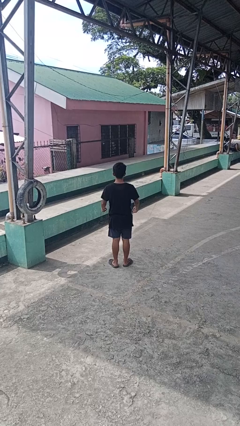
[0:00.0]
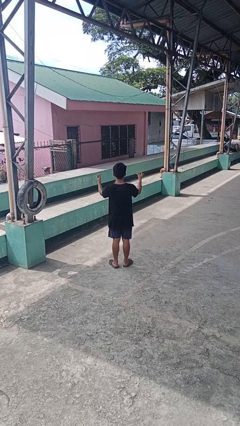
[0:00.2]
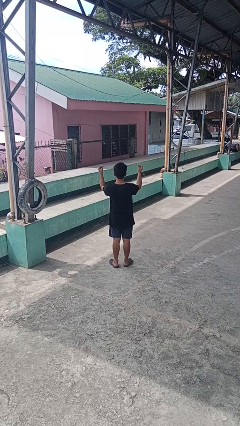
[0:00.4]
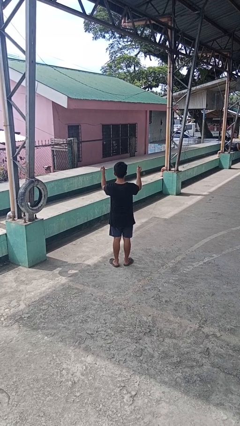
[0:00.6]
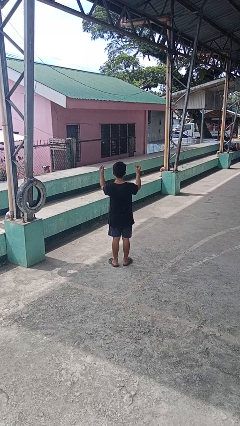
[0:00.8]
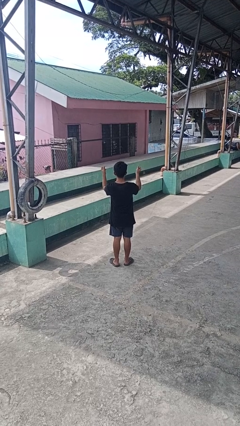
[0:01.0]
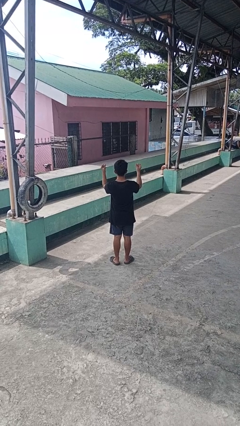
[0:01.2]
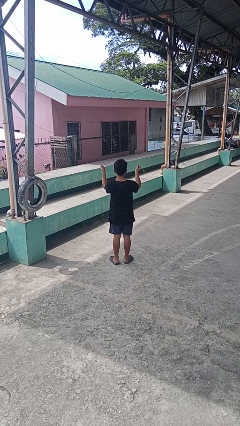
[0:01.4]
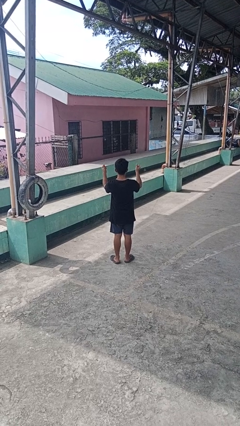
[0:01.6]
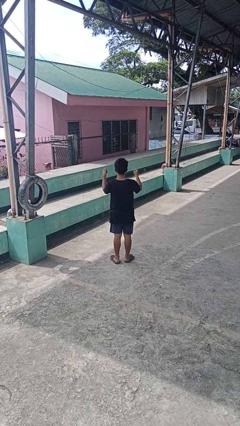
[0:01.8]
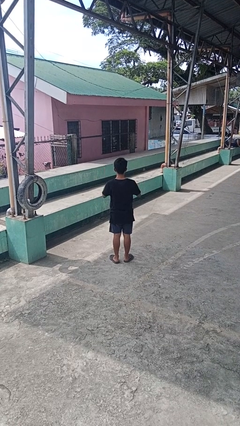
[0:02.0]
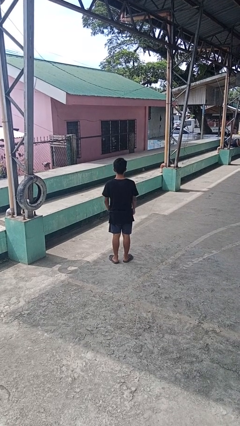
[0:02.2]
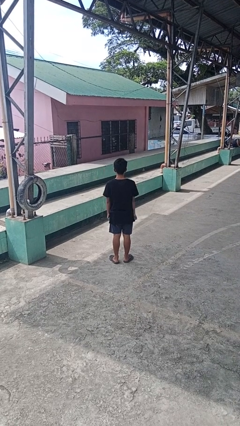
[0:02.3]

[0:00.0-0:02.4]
person snaps fingers

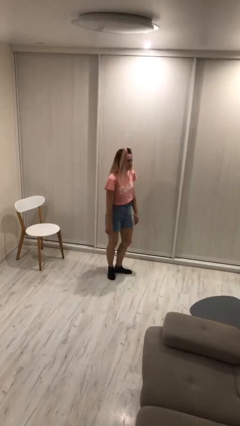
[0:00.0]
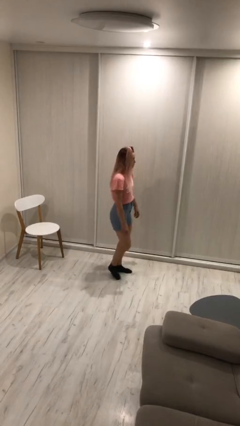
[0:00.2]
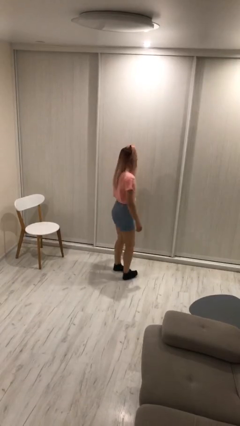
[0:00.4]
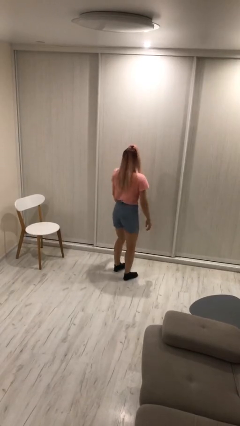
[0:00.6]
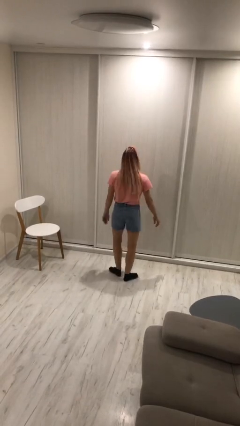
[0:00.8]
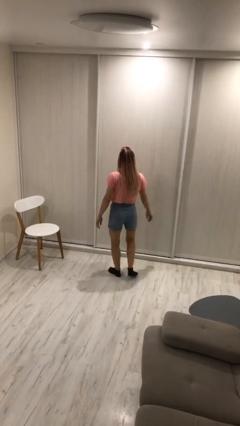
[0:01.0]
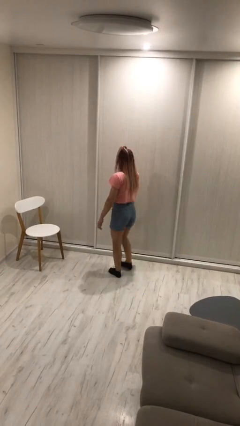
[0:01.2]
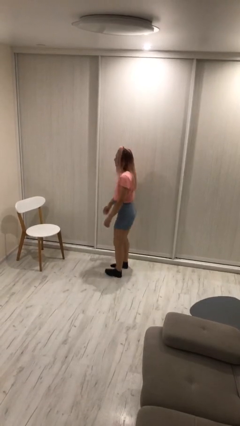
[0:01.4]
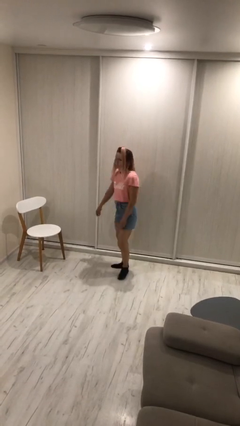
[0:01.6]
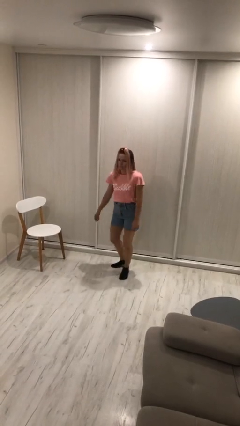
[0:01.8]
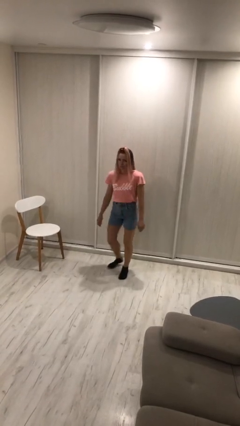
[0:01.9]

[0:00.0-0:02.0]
person twirls

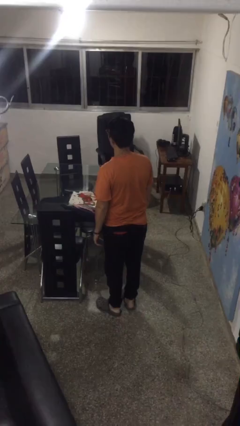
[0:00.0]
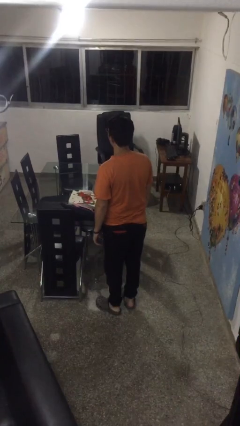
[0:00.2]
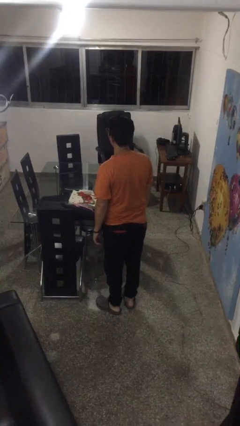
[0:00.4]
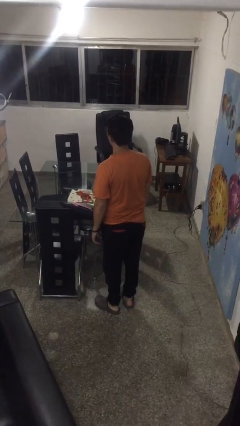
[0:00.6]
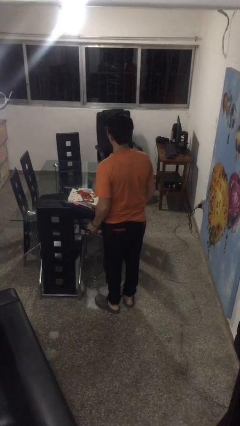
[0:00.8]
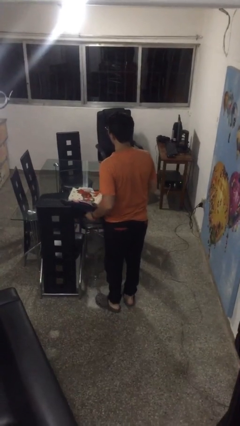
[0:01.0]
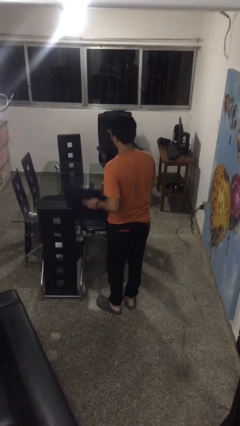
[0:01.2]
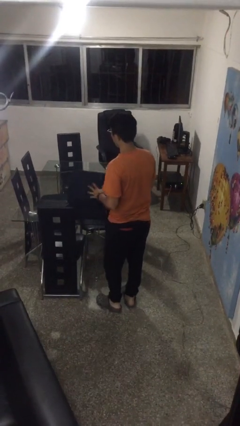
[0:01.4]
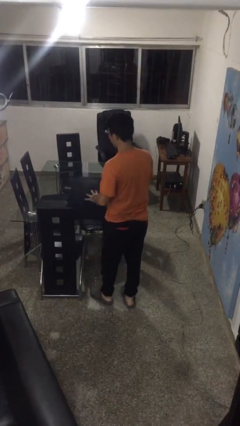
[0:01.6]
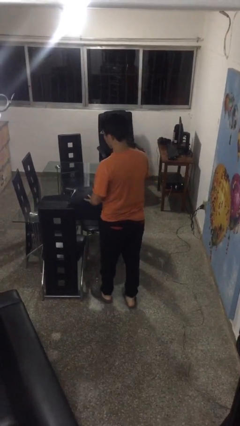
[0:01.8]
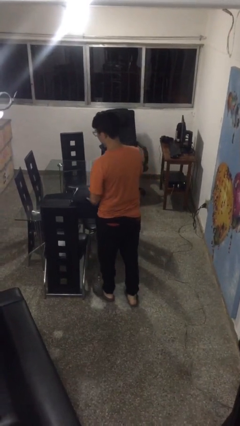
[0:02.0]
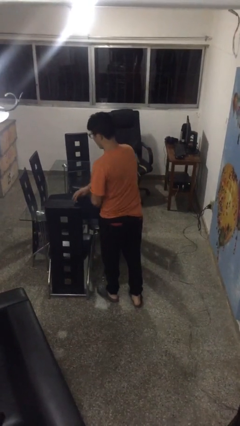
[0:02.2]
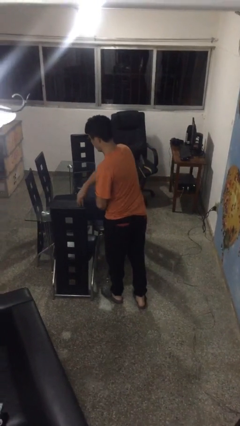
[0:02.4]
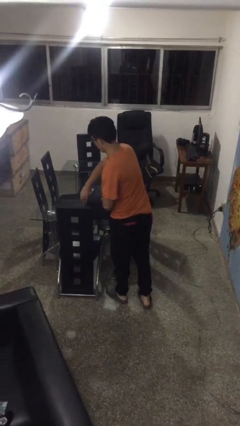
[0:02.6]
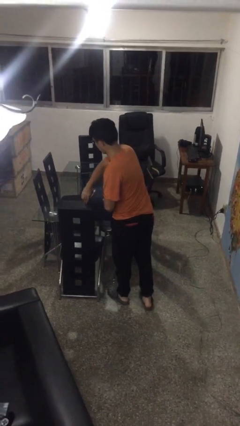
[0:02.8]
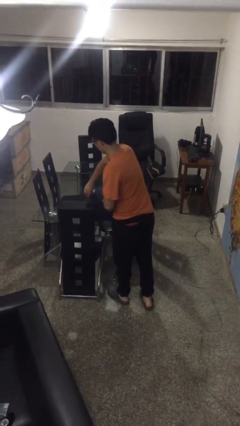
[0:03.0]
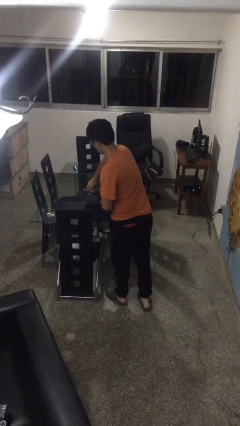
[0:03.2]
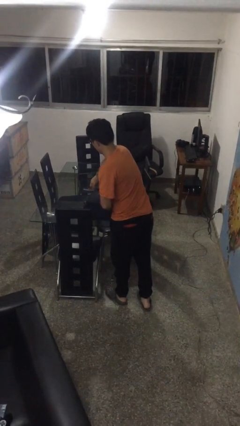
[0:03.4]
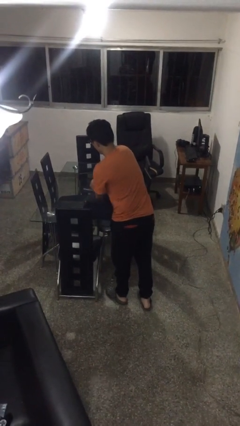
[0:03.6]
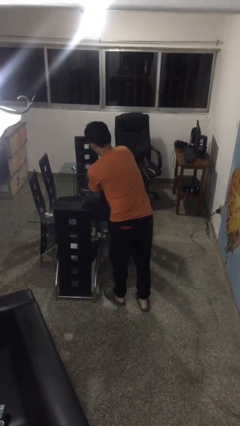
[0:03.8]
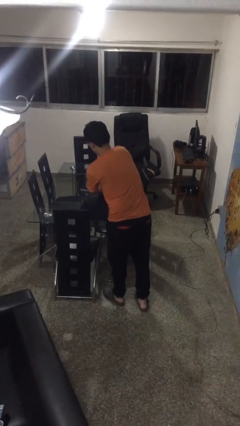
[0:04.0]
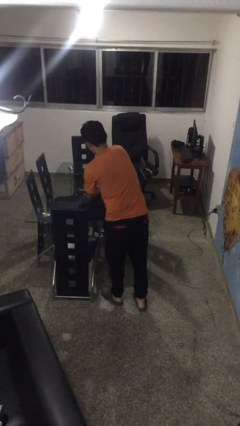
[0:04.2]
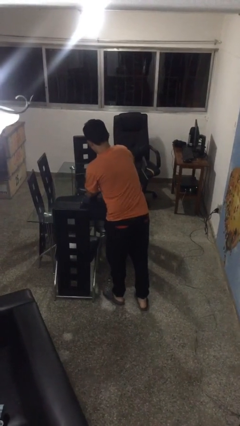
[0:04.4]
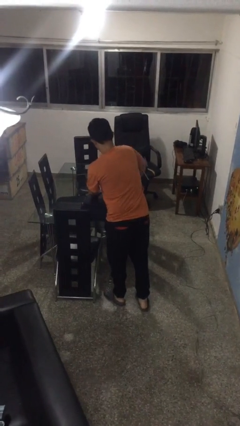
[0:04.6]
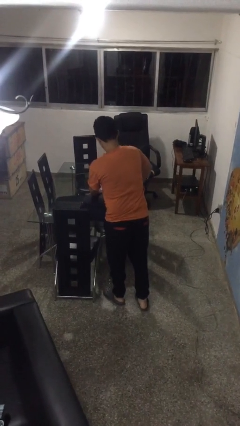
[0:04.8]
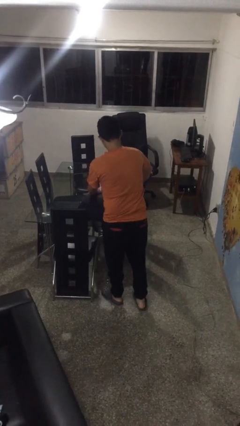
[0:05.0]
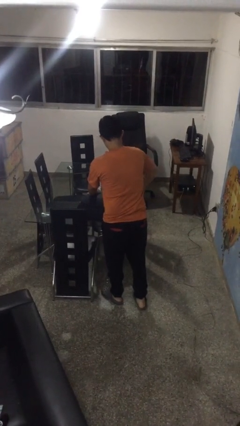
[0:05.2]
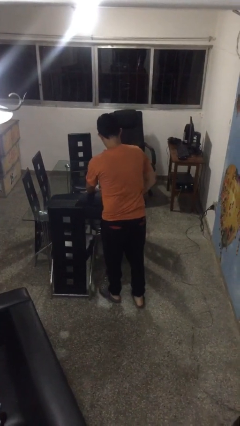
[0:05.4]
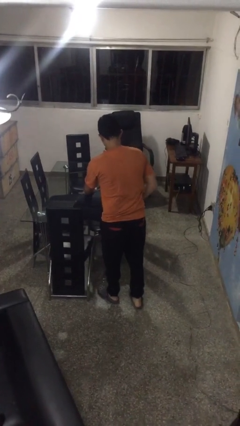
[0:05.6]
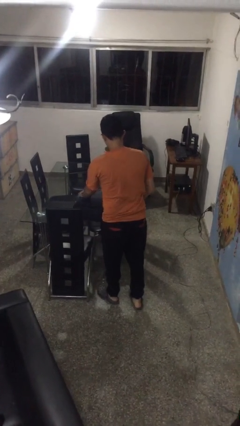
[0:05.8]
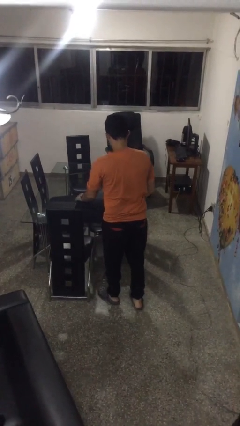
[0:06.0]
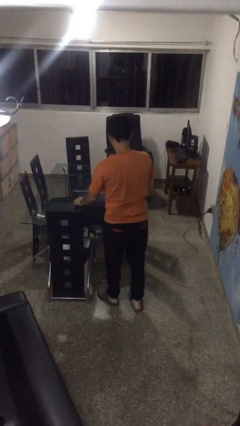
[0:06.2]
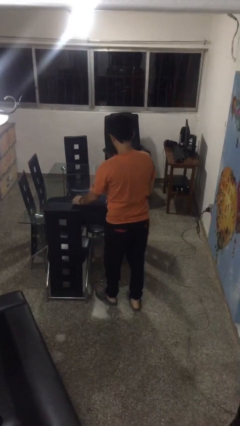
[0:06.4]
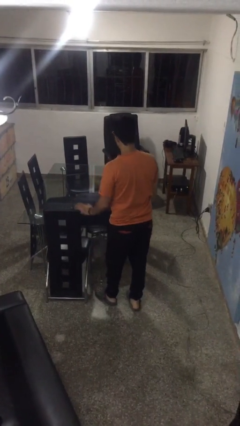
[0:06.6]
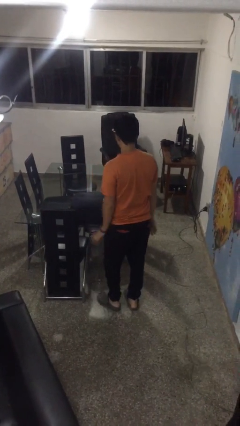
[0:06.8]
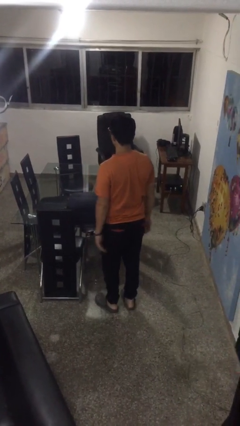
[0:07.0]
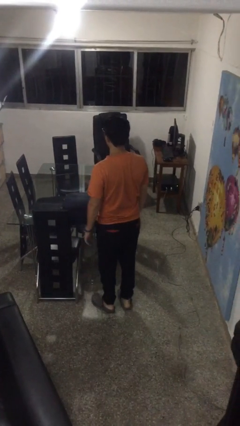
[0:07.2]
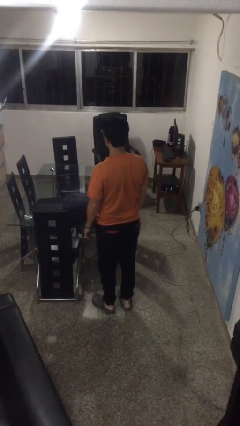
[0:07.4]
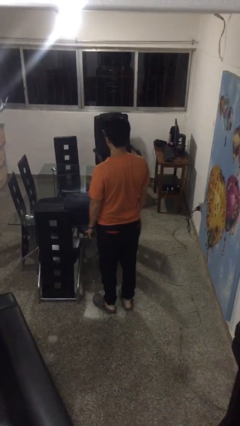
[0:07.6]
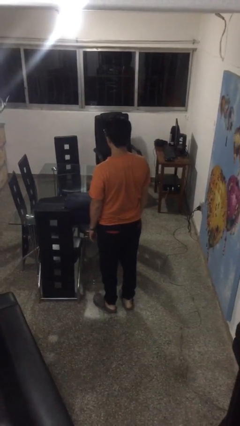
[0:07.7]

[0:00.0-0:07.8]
person closes suitcase

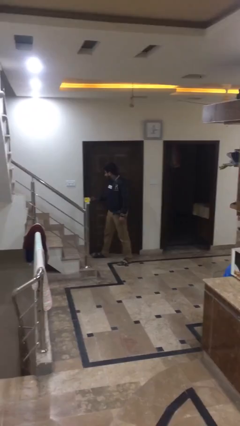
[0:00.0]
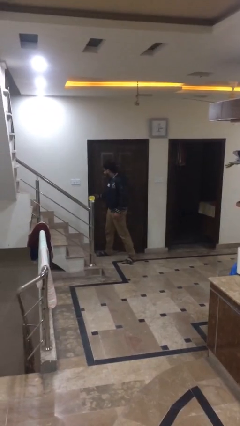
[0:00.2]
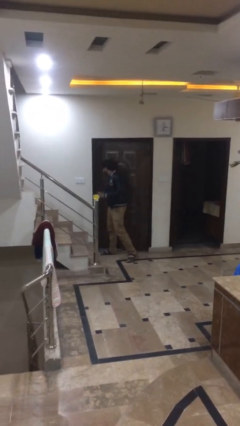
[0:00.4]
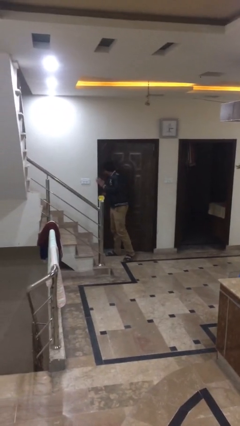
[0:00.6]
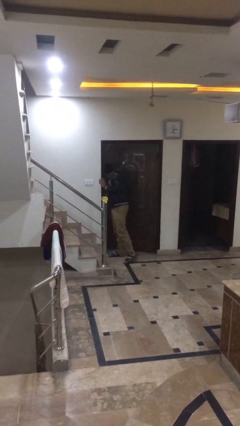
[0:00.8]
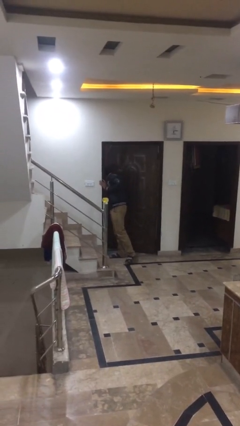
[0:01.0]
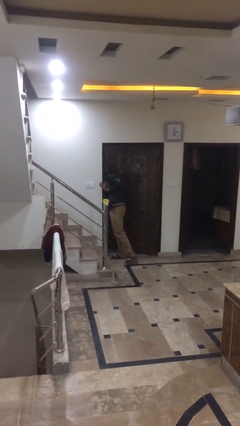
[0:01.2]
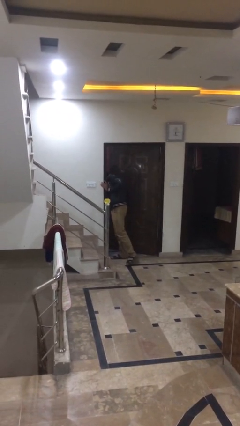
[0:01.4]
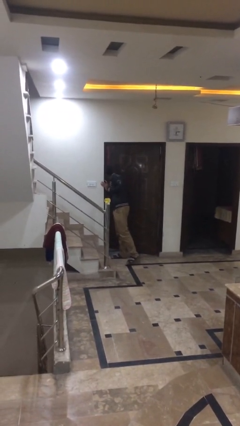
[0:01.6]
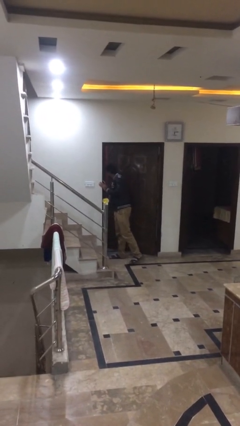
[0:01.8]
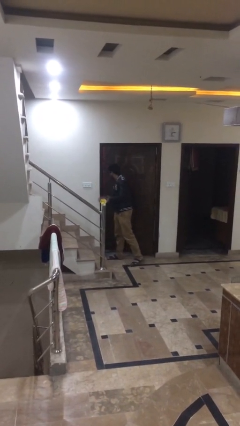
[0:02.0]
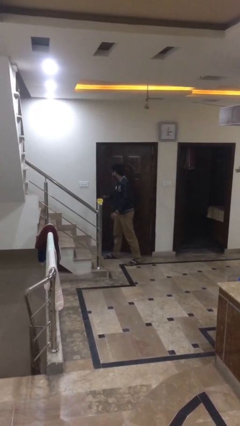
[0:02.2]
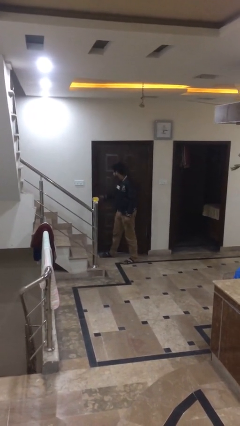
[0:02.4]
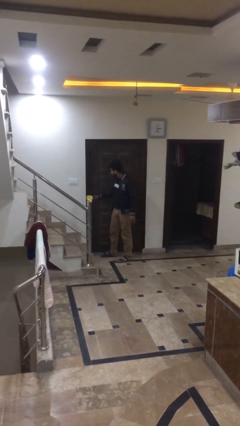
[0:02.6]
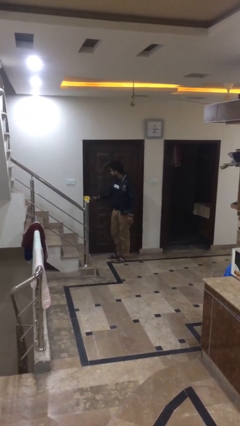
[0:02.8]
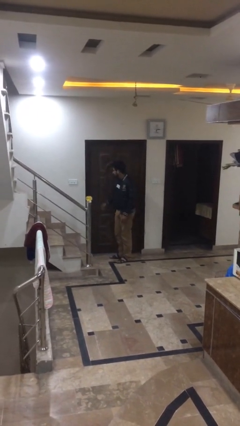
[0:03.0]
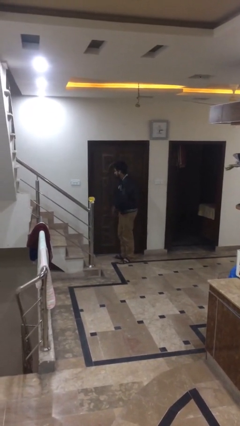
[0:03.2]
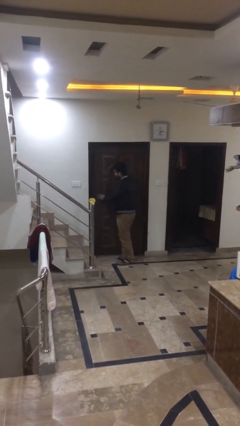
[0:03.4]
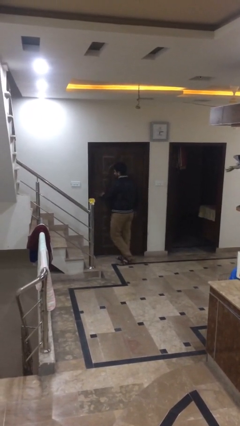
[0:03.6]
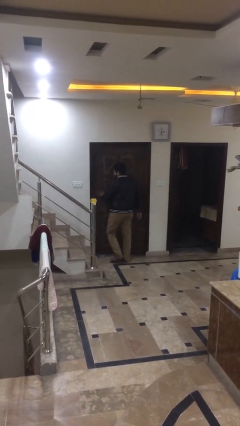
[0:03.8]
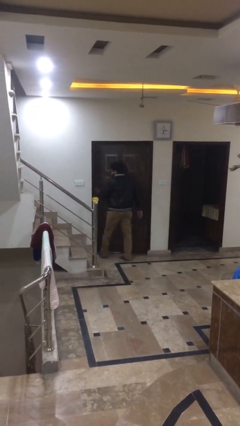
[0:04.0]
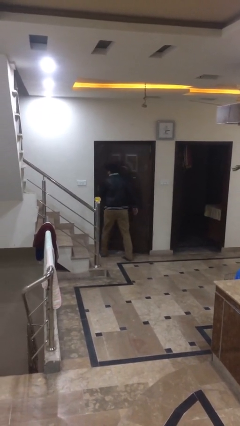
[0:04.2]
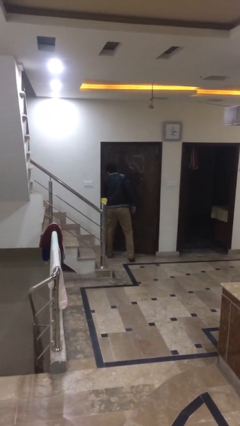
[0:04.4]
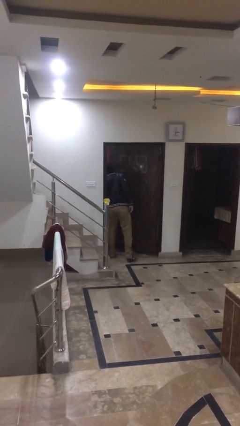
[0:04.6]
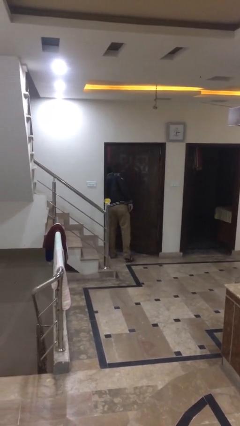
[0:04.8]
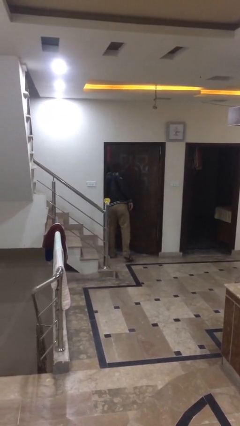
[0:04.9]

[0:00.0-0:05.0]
person opens facility door

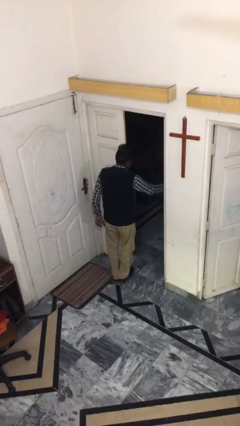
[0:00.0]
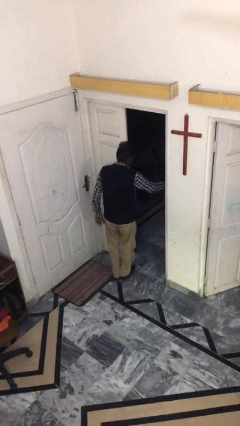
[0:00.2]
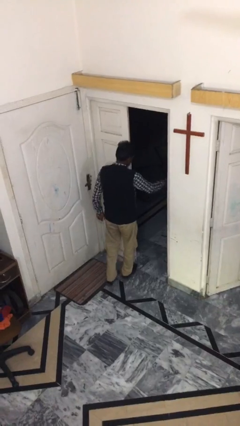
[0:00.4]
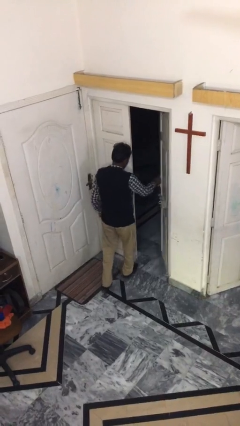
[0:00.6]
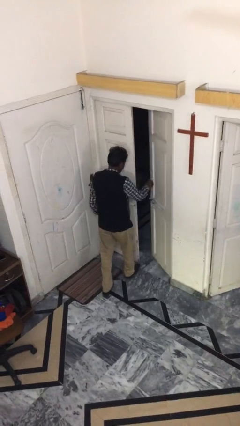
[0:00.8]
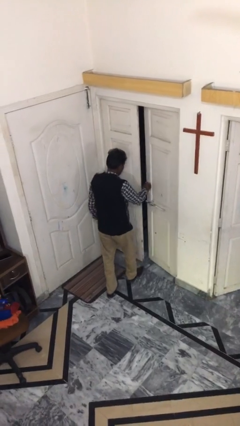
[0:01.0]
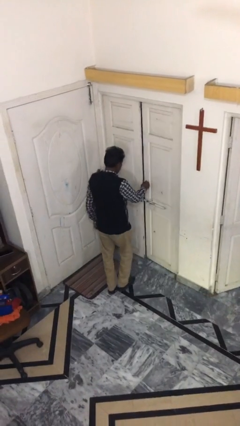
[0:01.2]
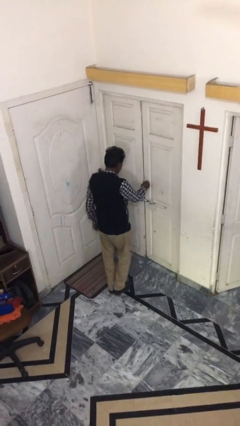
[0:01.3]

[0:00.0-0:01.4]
person closes facility door
